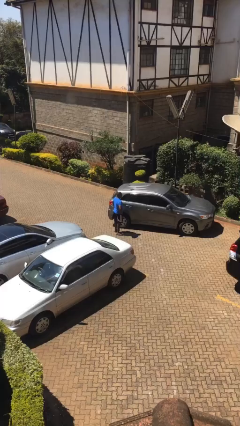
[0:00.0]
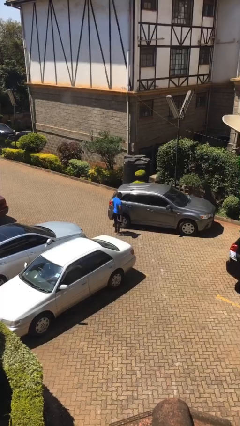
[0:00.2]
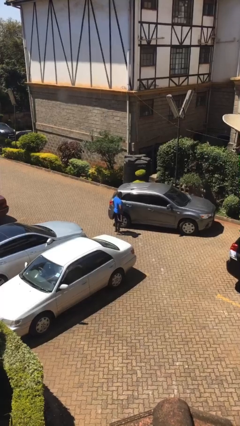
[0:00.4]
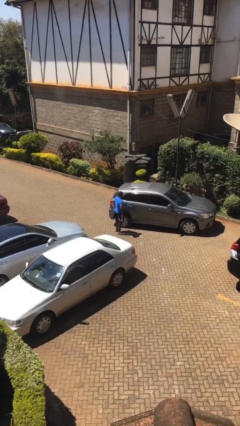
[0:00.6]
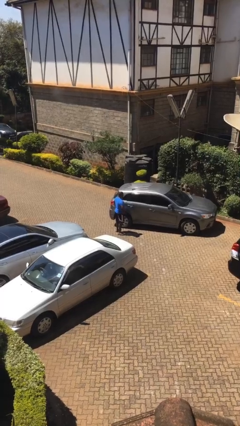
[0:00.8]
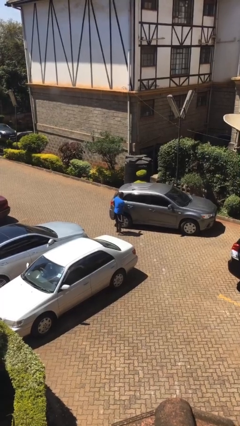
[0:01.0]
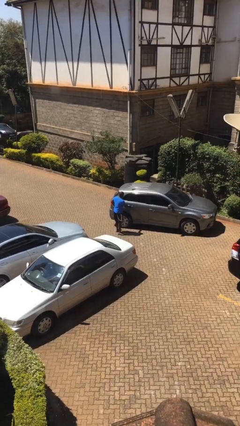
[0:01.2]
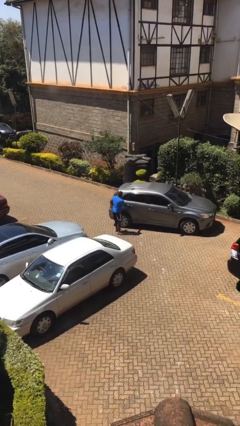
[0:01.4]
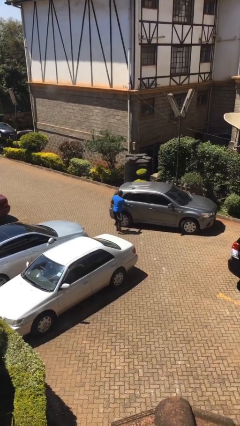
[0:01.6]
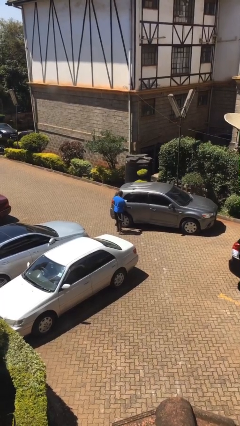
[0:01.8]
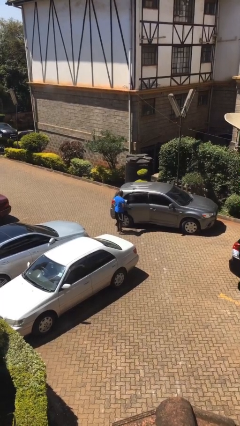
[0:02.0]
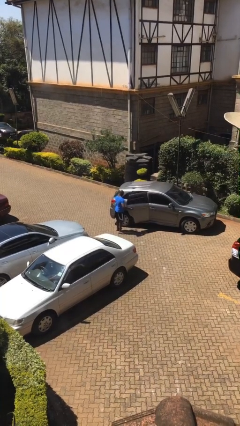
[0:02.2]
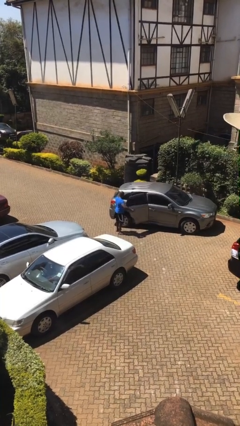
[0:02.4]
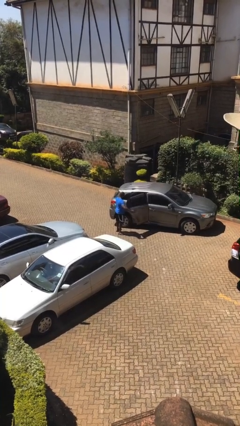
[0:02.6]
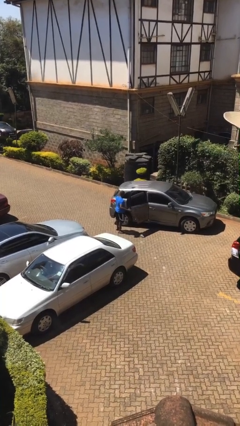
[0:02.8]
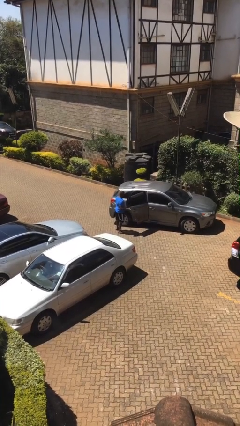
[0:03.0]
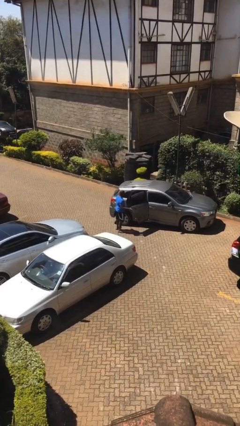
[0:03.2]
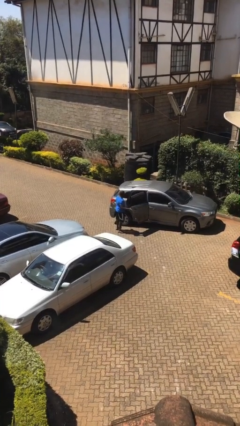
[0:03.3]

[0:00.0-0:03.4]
person opens car door

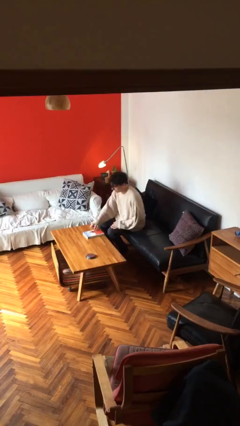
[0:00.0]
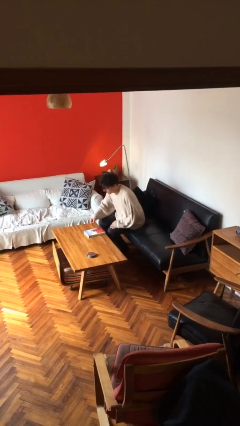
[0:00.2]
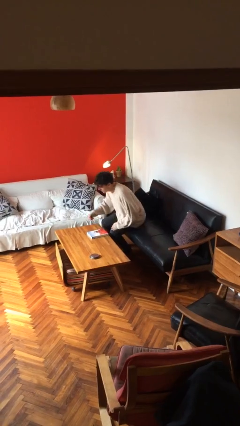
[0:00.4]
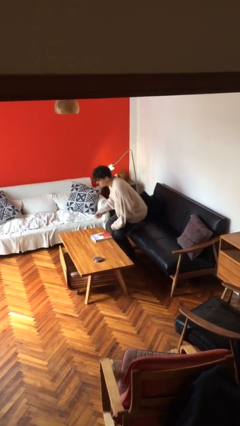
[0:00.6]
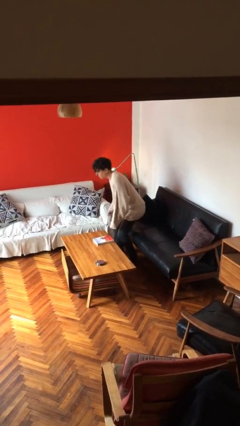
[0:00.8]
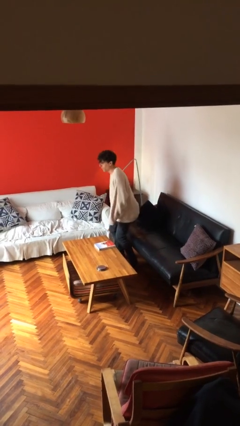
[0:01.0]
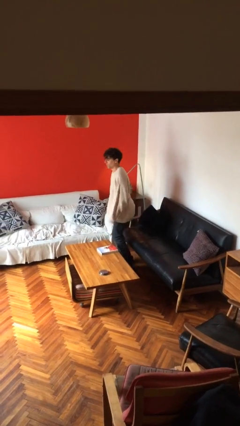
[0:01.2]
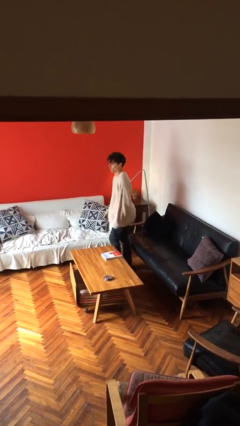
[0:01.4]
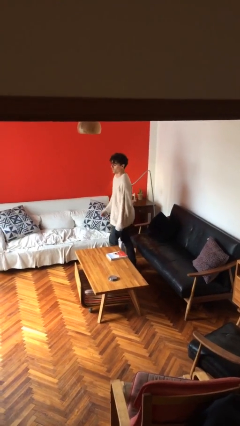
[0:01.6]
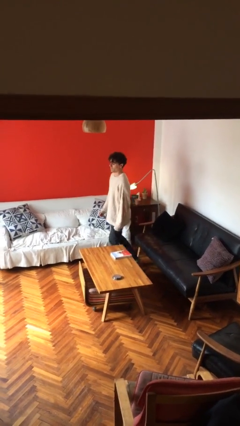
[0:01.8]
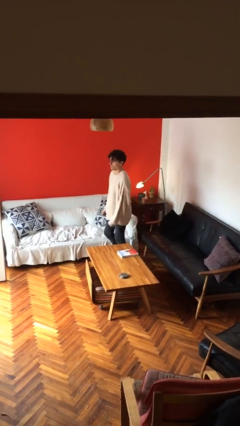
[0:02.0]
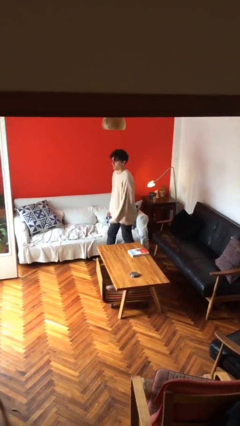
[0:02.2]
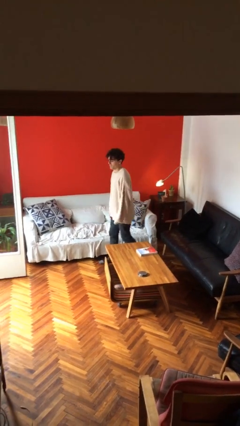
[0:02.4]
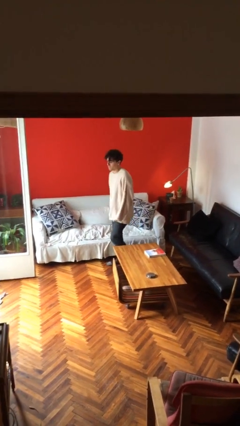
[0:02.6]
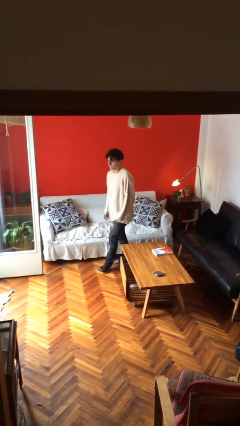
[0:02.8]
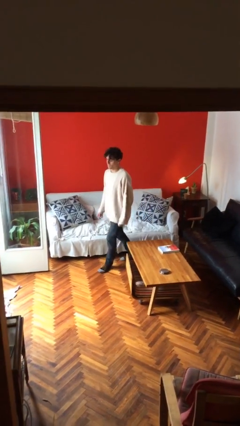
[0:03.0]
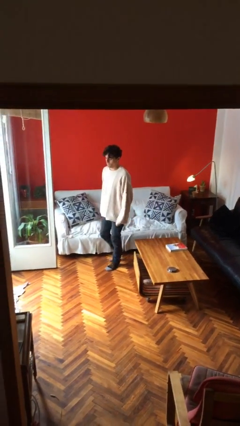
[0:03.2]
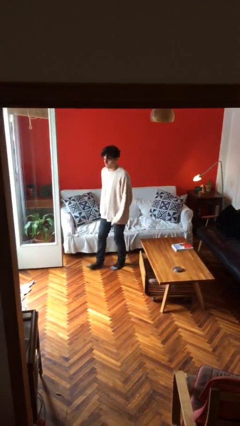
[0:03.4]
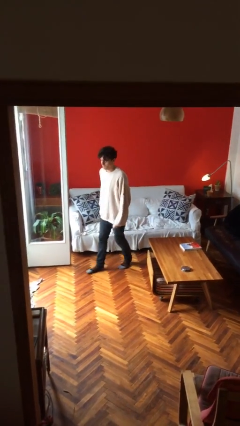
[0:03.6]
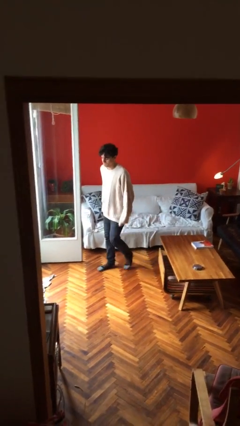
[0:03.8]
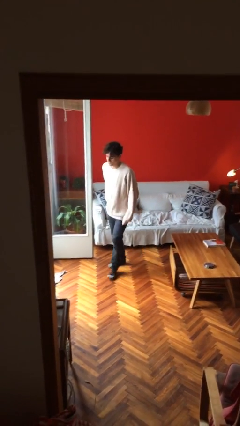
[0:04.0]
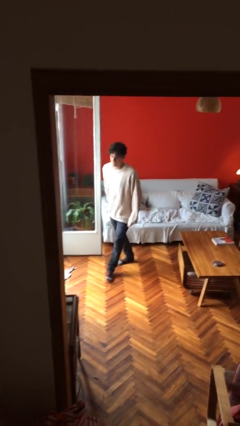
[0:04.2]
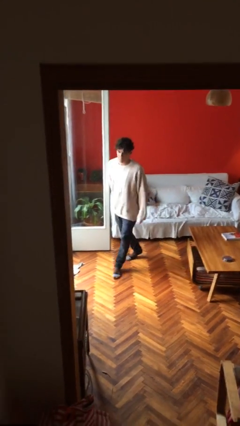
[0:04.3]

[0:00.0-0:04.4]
person stands up

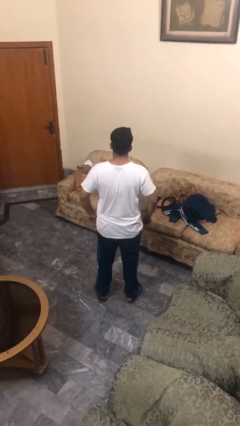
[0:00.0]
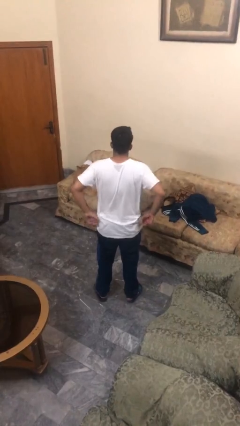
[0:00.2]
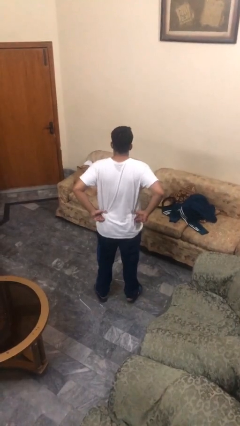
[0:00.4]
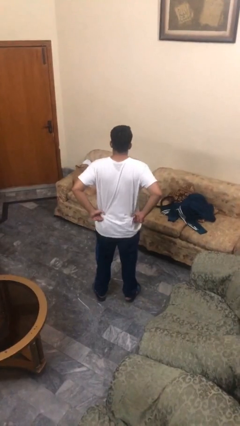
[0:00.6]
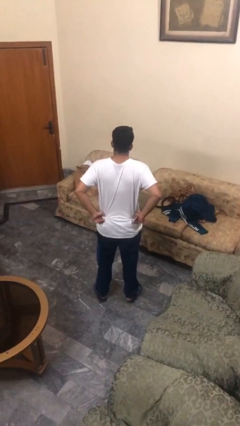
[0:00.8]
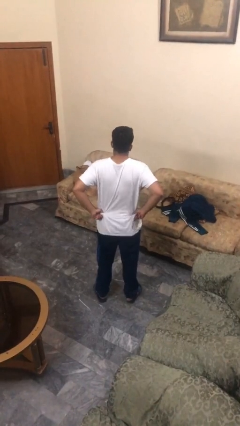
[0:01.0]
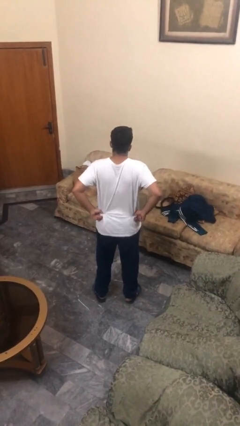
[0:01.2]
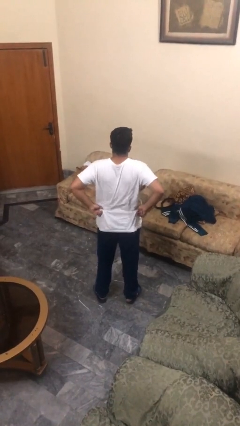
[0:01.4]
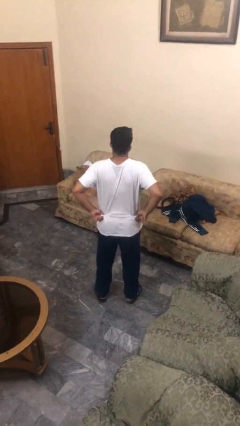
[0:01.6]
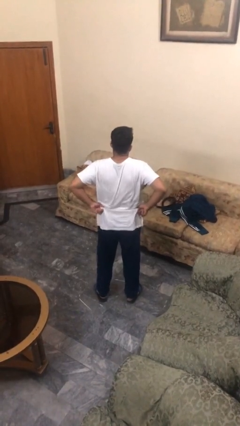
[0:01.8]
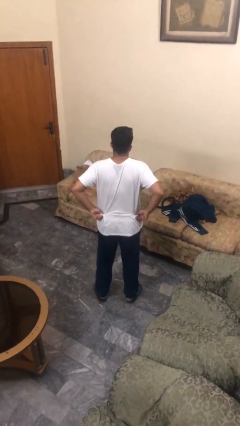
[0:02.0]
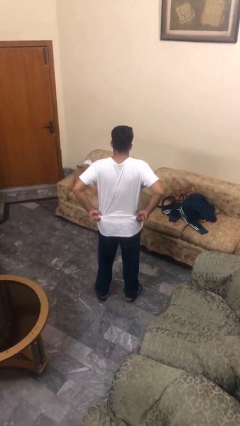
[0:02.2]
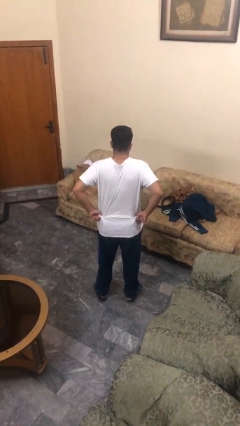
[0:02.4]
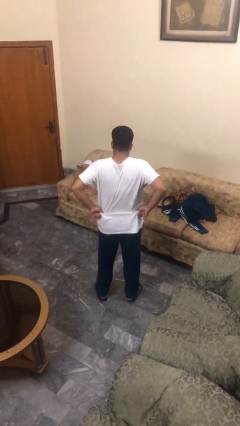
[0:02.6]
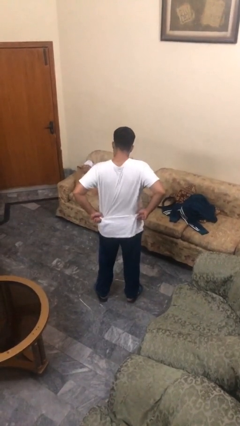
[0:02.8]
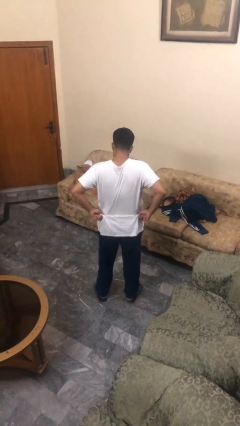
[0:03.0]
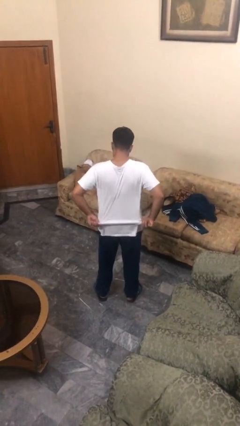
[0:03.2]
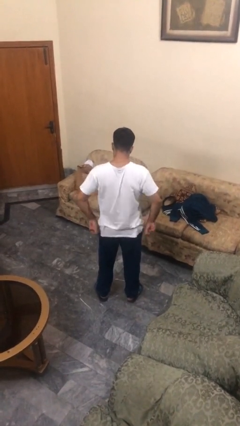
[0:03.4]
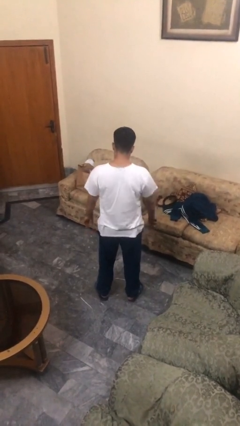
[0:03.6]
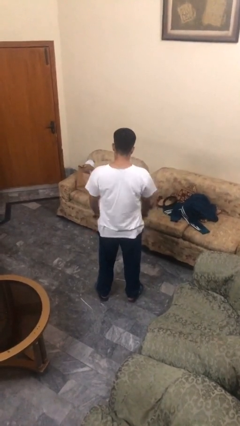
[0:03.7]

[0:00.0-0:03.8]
person hikes up pants

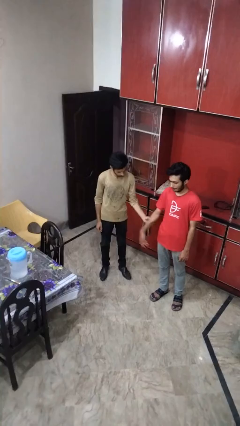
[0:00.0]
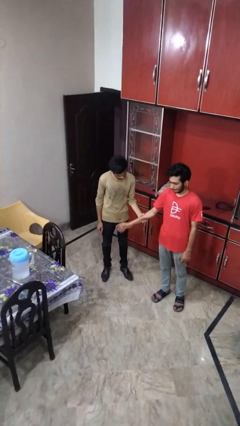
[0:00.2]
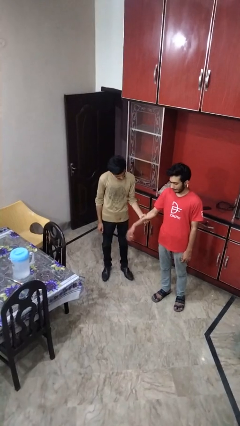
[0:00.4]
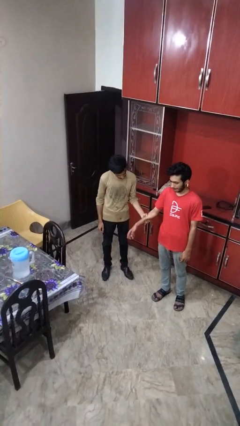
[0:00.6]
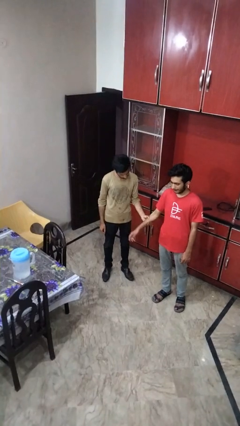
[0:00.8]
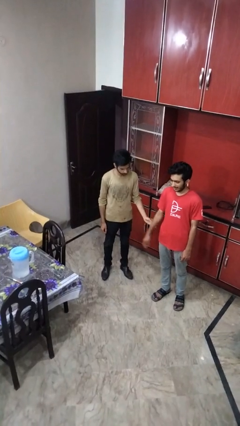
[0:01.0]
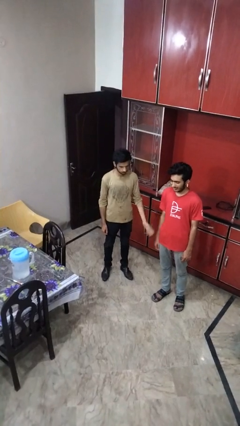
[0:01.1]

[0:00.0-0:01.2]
person grabs person by forearm

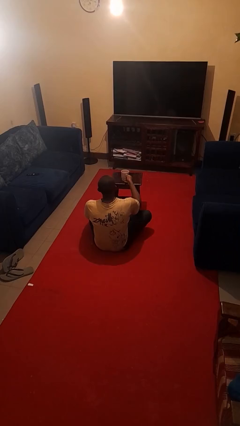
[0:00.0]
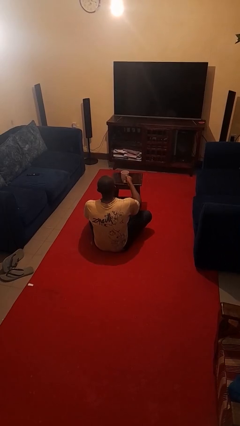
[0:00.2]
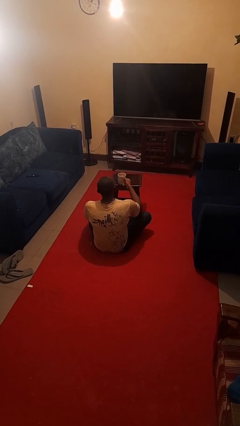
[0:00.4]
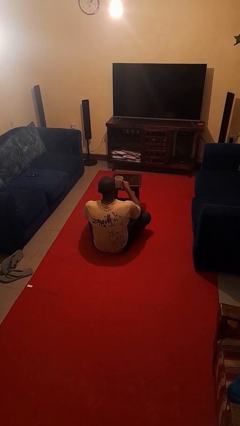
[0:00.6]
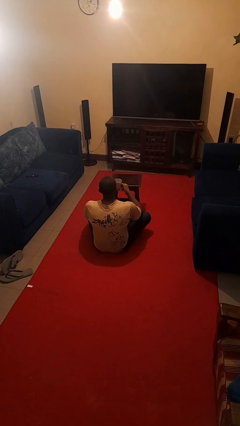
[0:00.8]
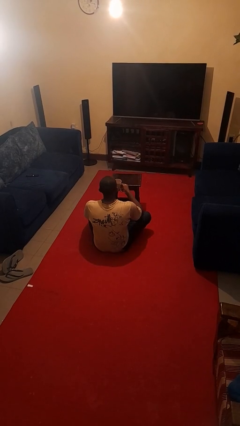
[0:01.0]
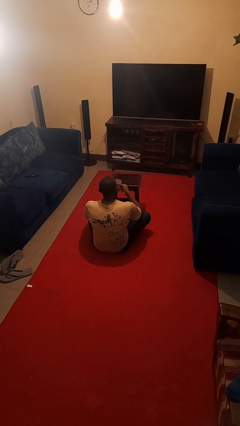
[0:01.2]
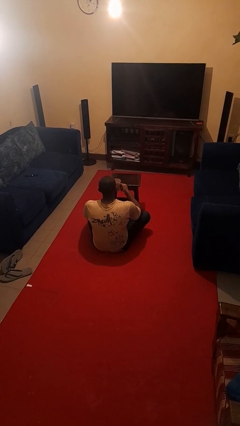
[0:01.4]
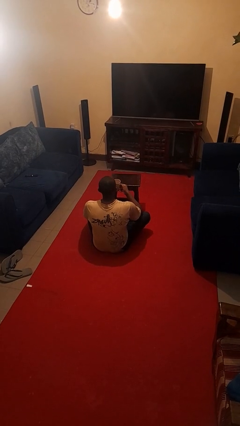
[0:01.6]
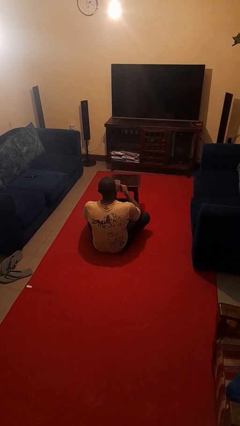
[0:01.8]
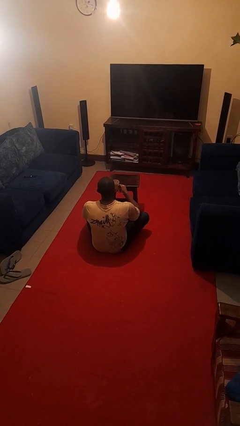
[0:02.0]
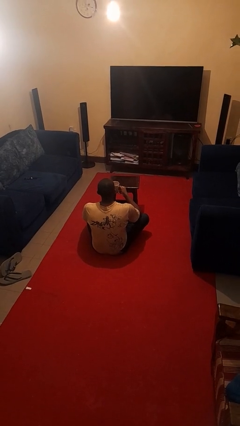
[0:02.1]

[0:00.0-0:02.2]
person picks up object from table

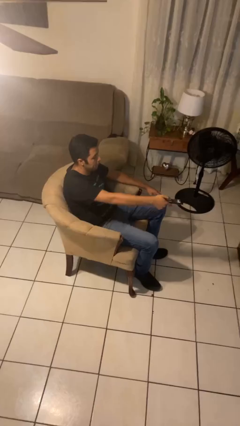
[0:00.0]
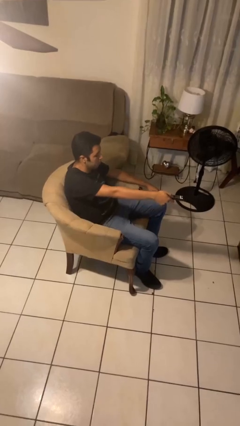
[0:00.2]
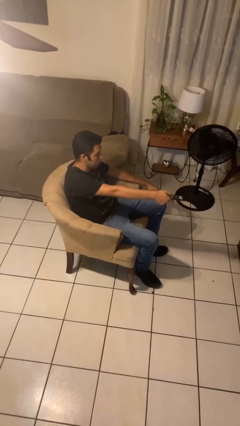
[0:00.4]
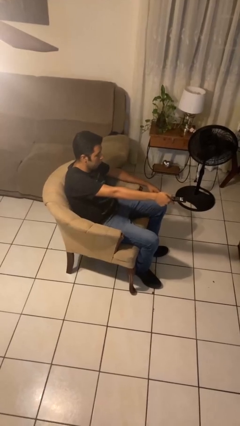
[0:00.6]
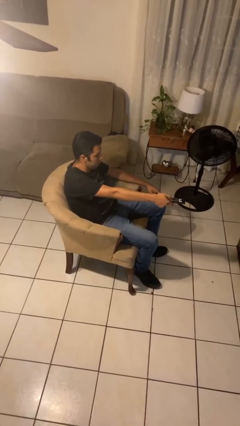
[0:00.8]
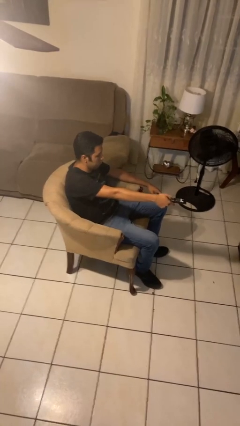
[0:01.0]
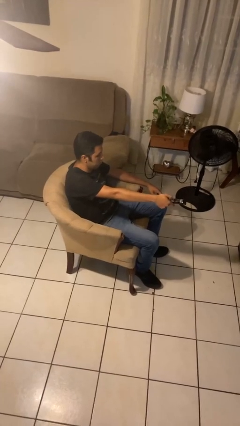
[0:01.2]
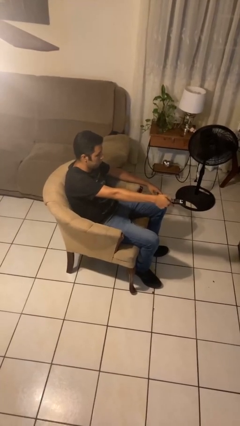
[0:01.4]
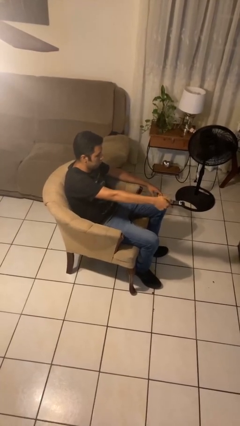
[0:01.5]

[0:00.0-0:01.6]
person uses television remote

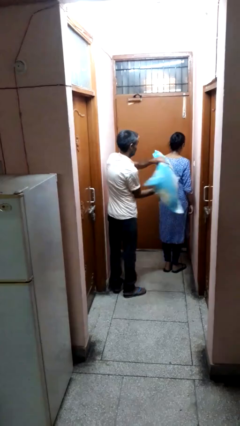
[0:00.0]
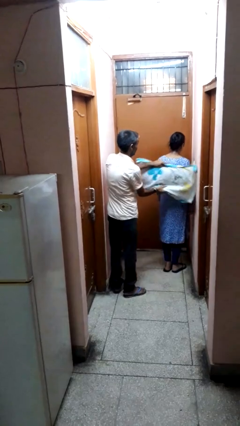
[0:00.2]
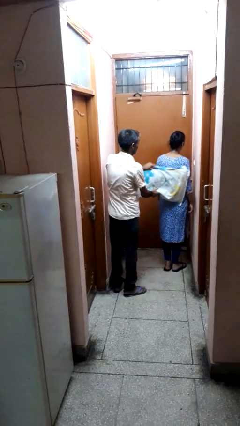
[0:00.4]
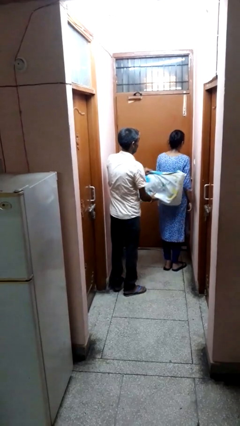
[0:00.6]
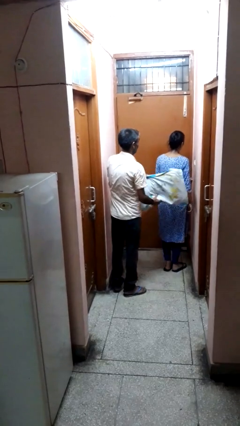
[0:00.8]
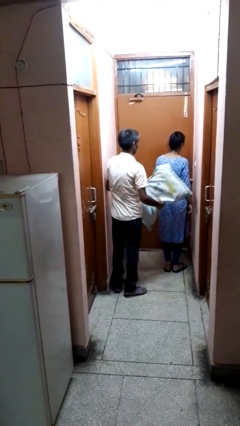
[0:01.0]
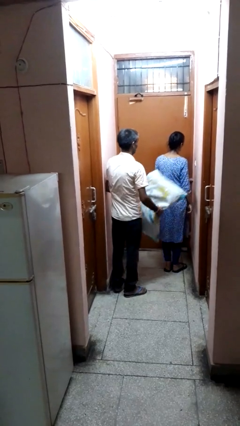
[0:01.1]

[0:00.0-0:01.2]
person hits person with pillow
